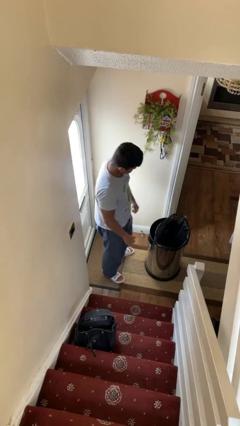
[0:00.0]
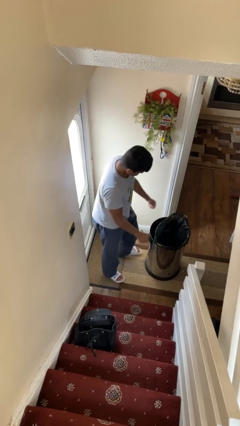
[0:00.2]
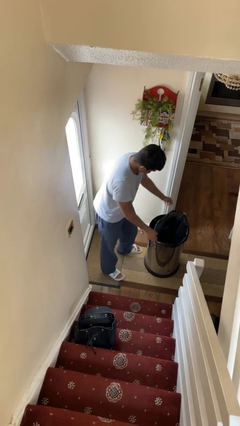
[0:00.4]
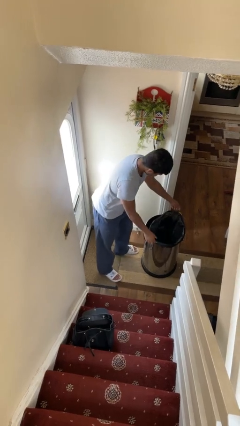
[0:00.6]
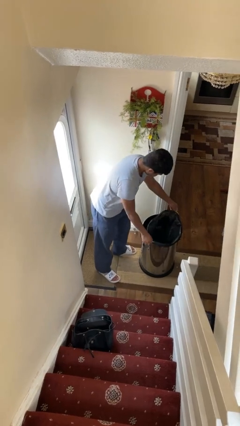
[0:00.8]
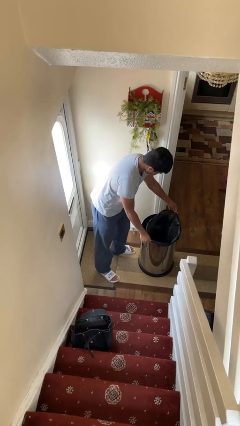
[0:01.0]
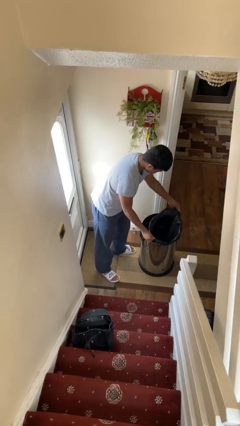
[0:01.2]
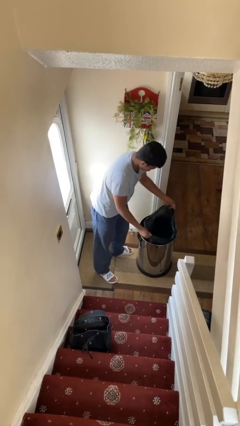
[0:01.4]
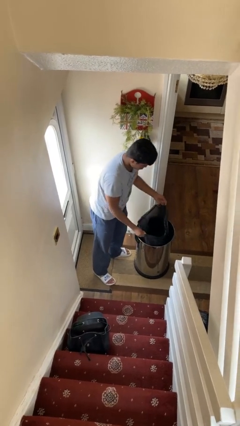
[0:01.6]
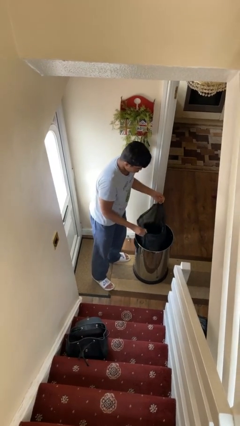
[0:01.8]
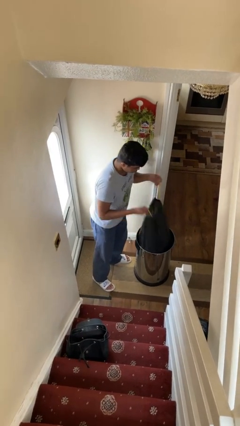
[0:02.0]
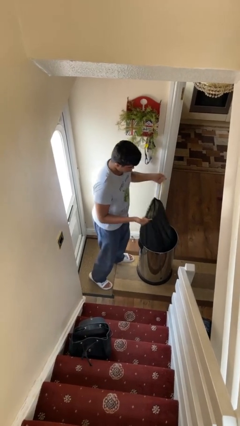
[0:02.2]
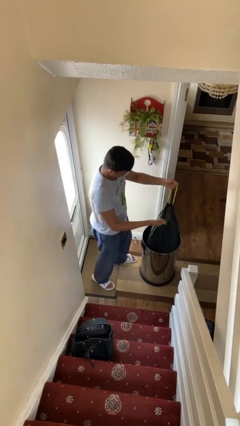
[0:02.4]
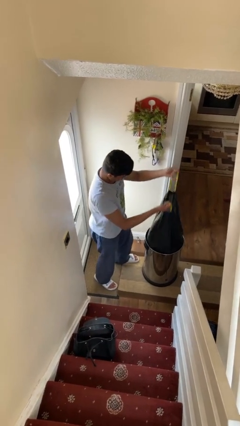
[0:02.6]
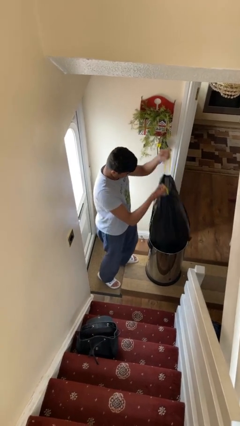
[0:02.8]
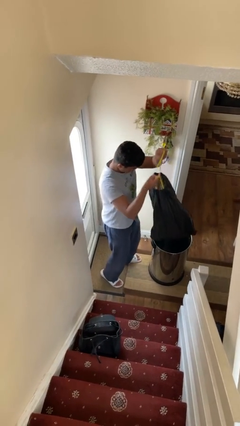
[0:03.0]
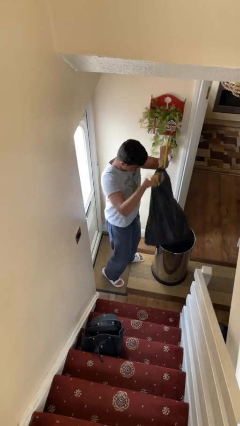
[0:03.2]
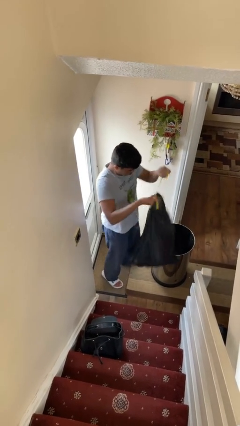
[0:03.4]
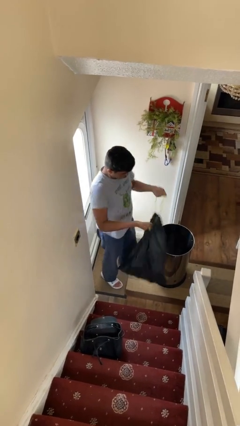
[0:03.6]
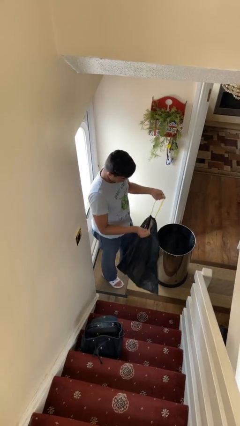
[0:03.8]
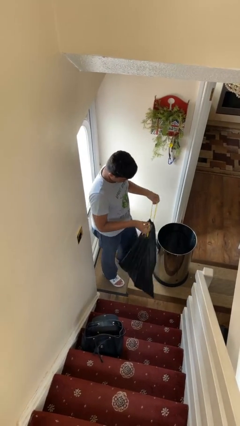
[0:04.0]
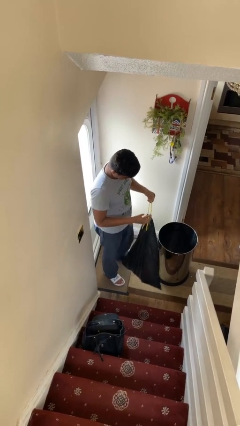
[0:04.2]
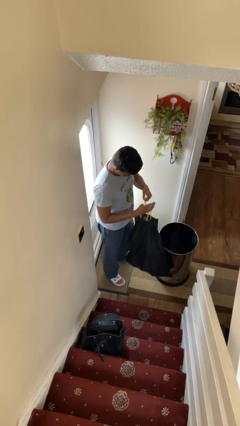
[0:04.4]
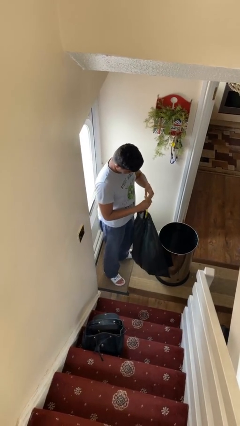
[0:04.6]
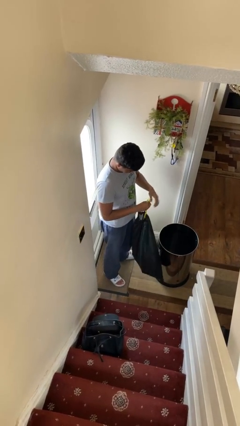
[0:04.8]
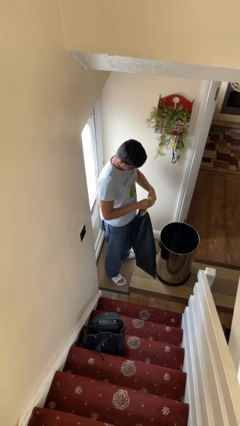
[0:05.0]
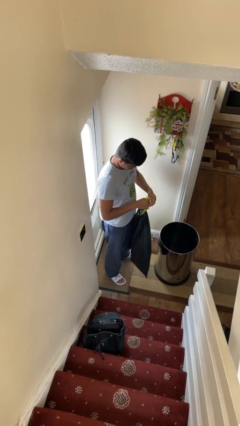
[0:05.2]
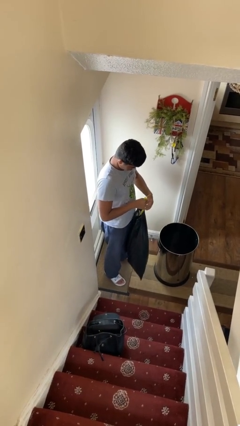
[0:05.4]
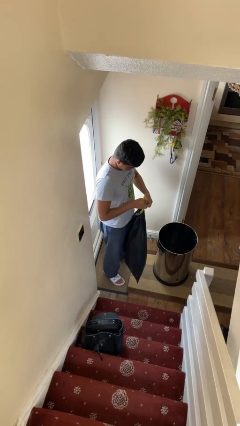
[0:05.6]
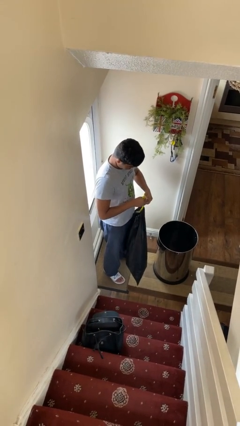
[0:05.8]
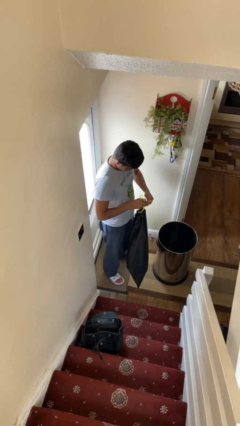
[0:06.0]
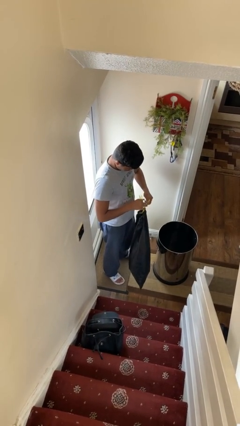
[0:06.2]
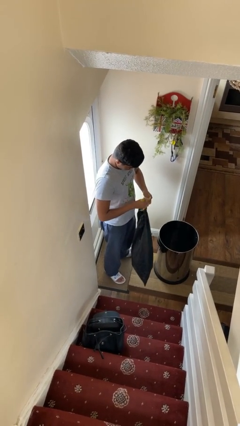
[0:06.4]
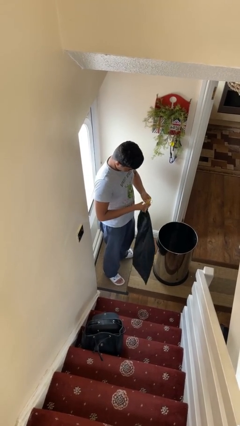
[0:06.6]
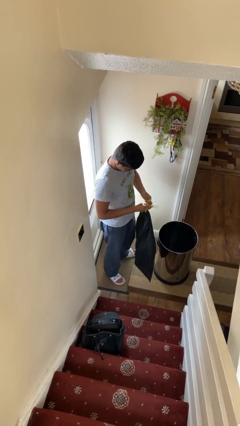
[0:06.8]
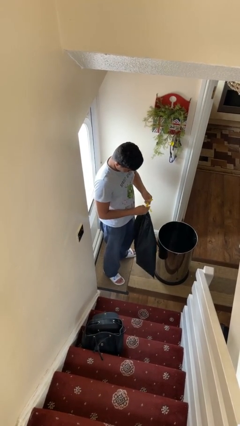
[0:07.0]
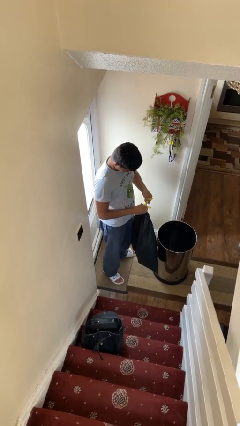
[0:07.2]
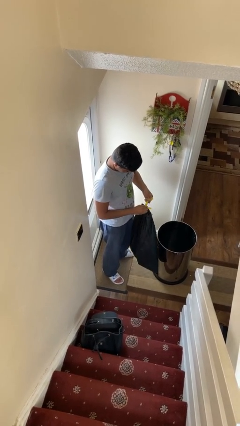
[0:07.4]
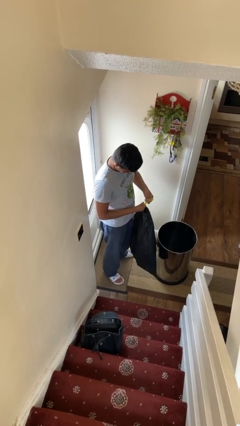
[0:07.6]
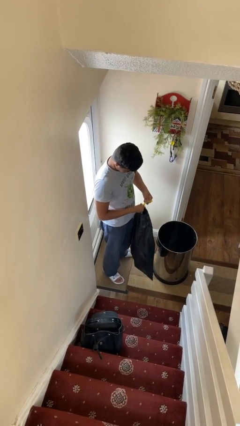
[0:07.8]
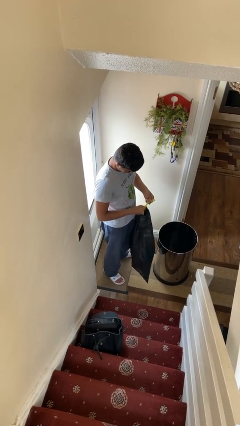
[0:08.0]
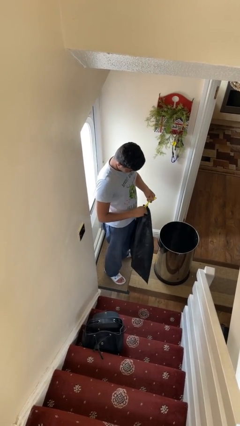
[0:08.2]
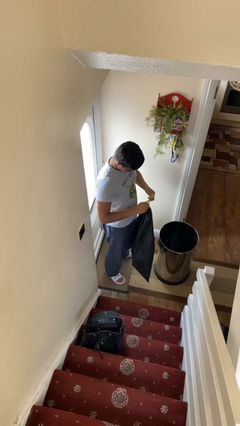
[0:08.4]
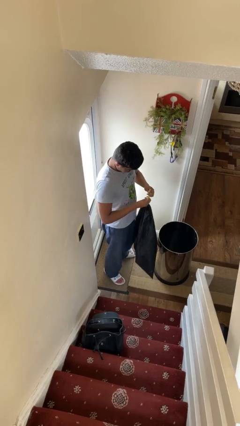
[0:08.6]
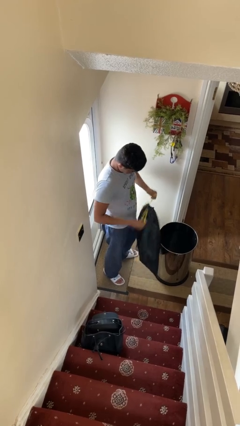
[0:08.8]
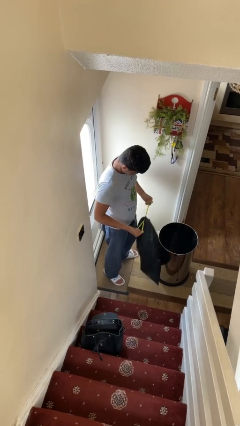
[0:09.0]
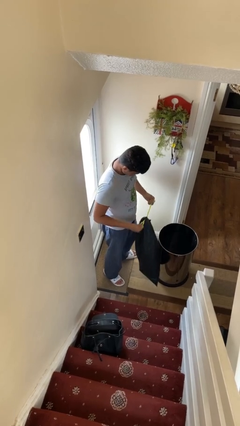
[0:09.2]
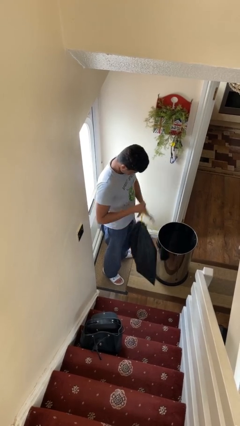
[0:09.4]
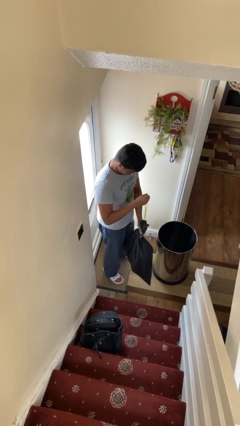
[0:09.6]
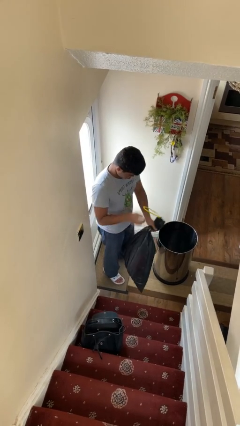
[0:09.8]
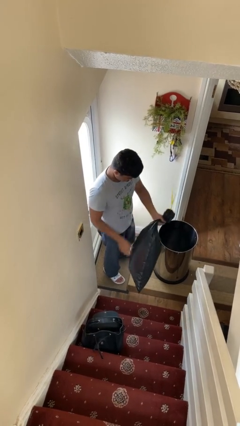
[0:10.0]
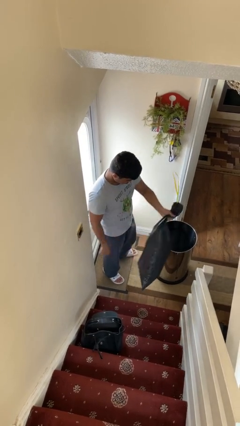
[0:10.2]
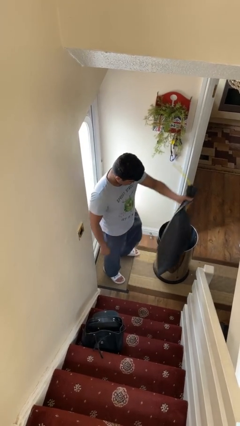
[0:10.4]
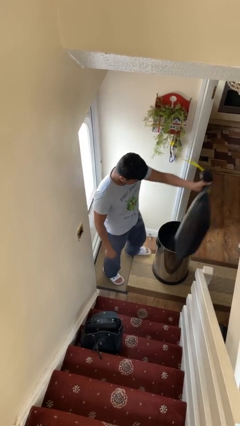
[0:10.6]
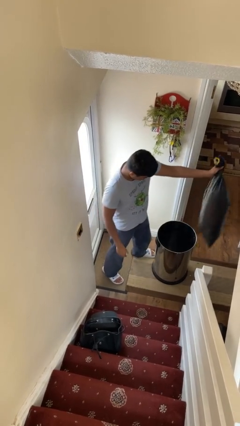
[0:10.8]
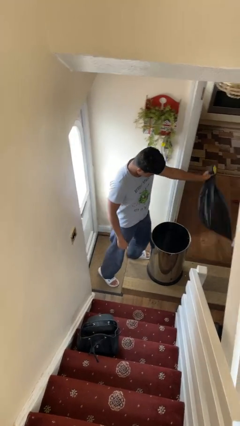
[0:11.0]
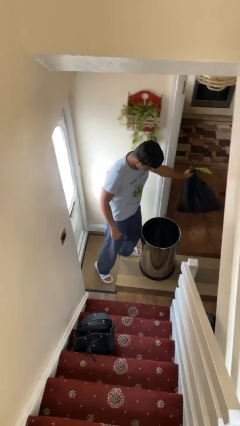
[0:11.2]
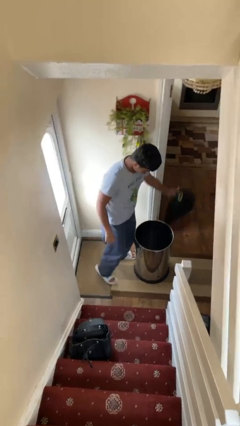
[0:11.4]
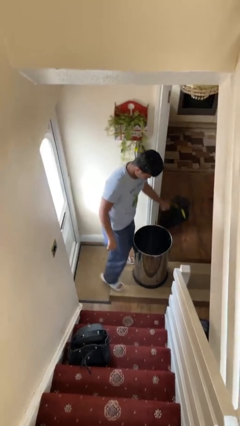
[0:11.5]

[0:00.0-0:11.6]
person removes trashbag from trashcan

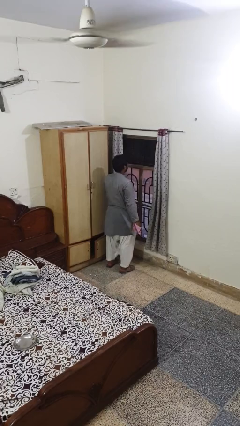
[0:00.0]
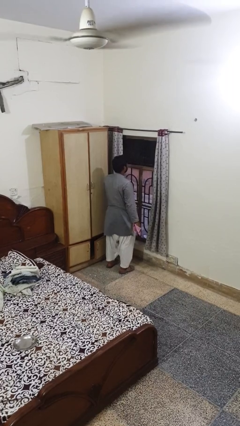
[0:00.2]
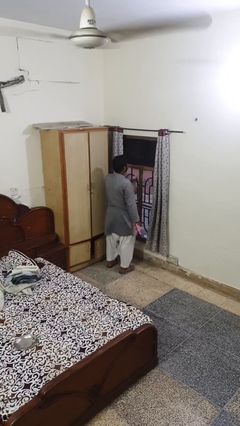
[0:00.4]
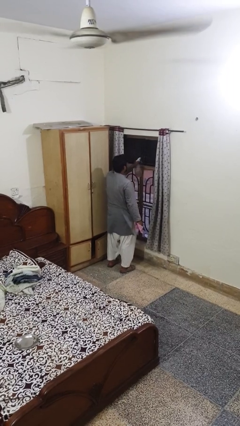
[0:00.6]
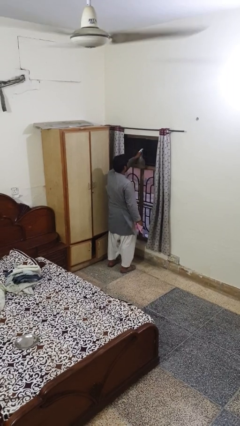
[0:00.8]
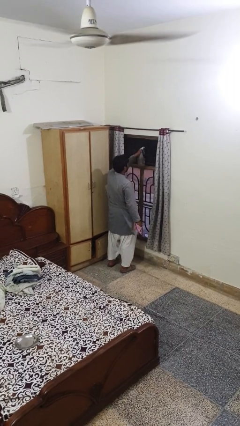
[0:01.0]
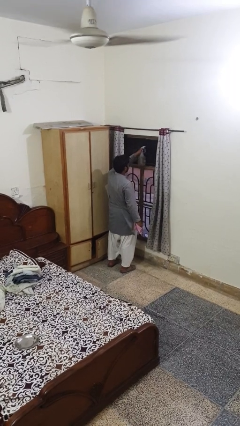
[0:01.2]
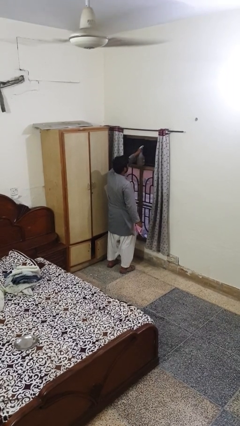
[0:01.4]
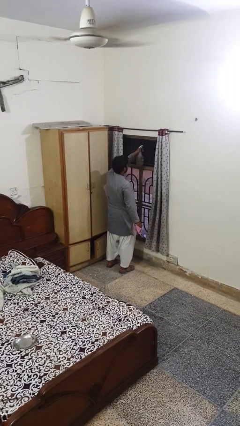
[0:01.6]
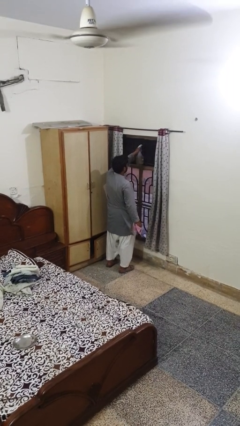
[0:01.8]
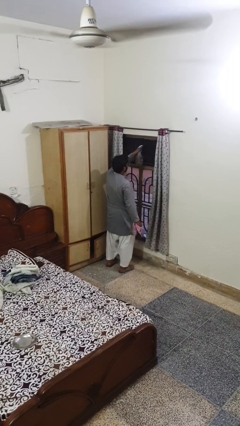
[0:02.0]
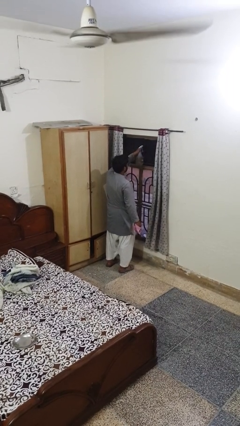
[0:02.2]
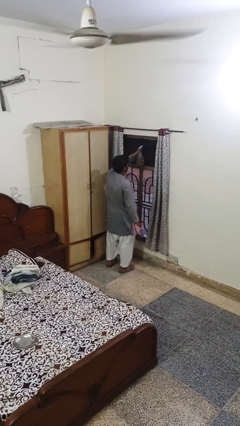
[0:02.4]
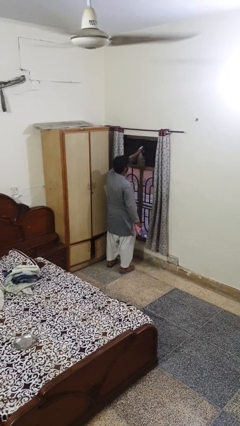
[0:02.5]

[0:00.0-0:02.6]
person sprays from bottle

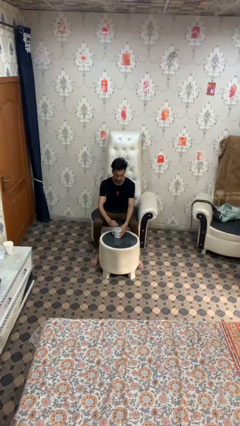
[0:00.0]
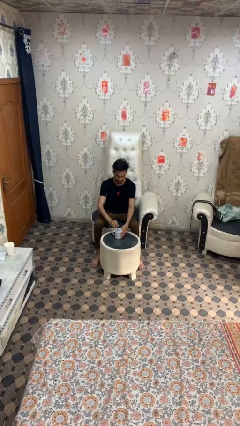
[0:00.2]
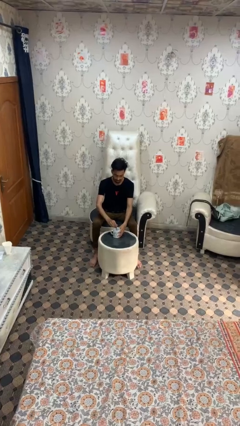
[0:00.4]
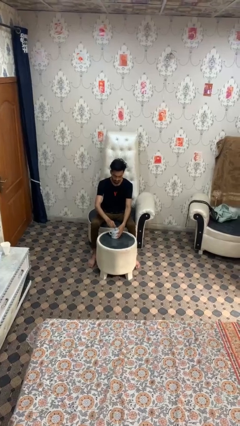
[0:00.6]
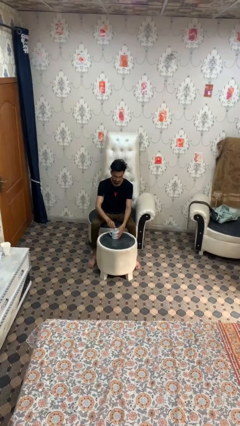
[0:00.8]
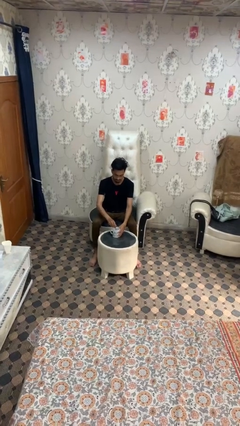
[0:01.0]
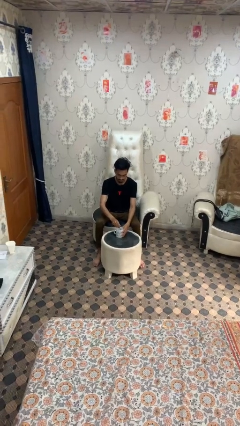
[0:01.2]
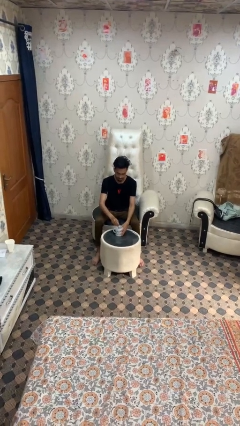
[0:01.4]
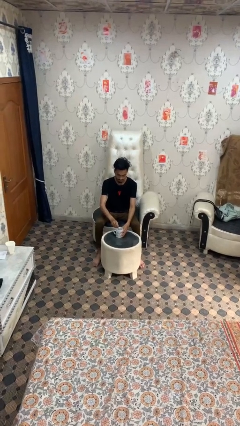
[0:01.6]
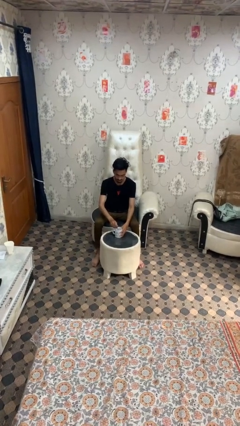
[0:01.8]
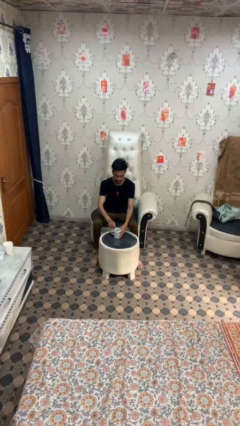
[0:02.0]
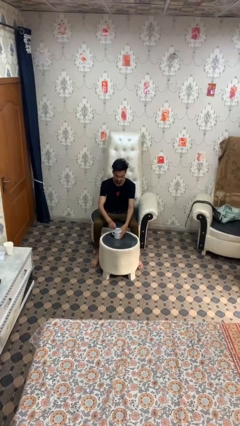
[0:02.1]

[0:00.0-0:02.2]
person stirs mug

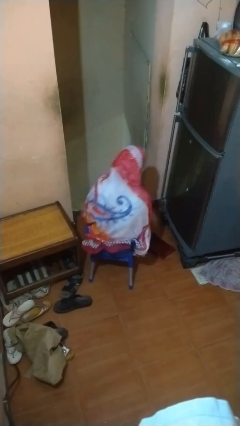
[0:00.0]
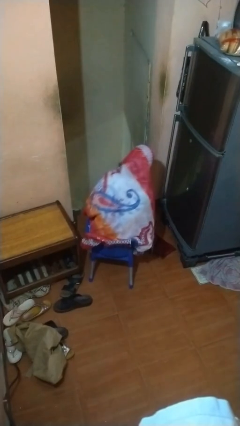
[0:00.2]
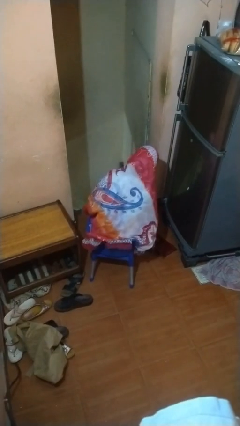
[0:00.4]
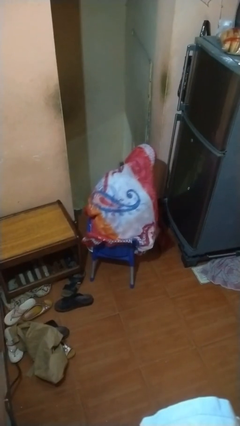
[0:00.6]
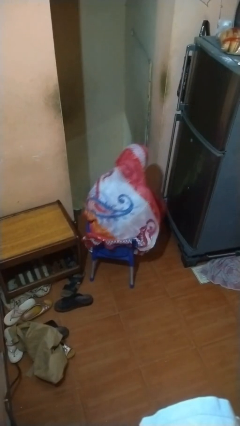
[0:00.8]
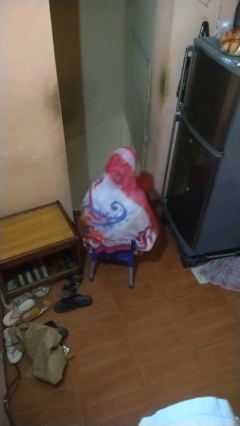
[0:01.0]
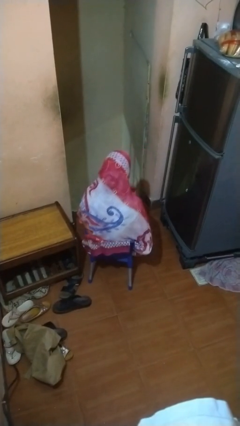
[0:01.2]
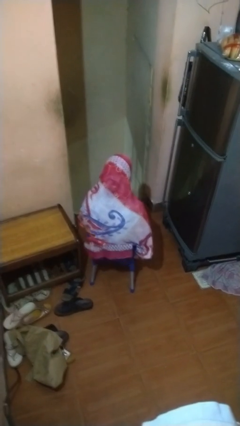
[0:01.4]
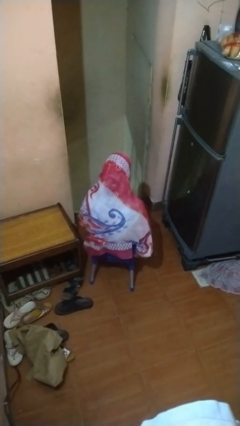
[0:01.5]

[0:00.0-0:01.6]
person picks up object from floor
